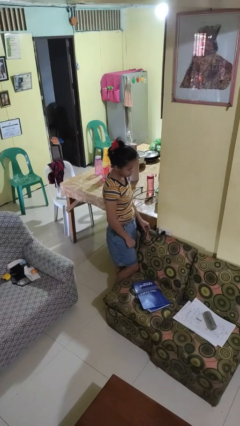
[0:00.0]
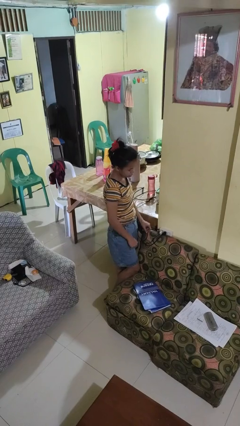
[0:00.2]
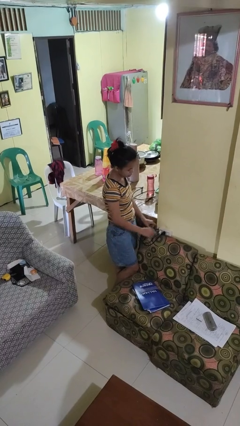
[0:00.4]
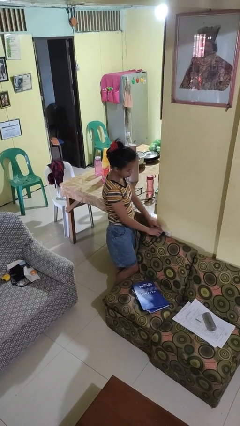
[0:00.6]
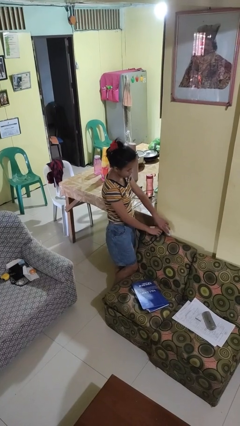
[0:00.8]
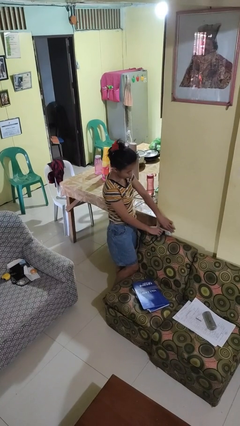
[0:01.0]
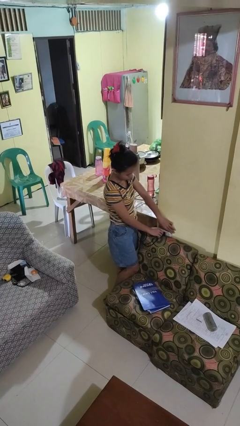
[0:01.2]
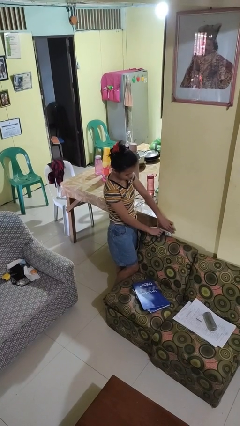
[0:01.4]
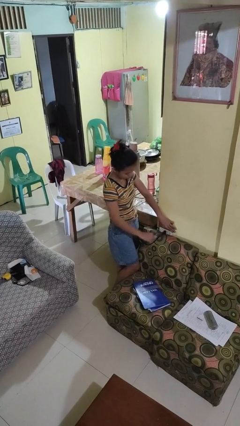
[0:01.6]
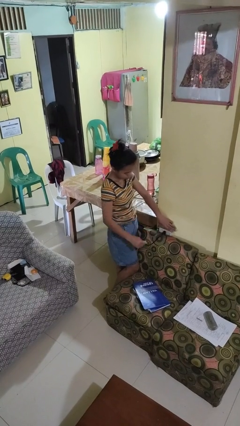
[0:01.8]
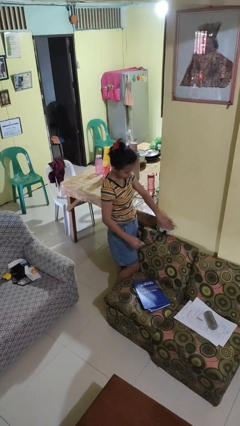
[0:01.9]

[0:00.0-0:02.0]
person unplugs from electrical socket

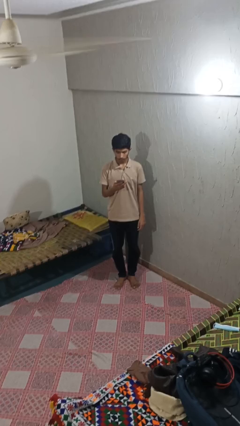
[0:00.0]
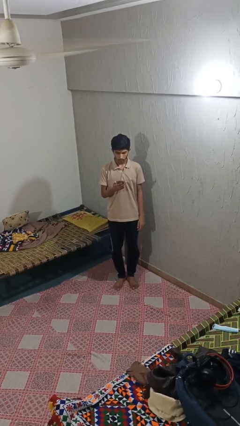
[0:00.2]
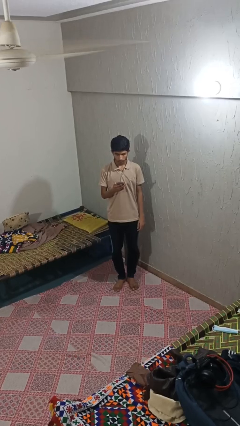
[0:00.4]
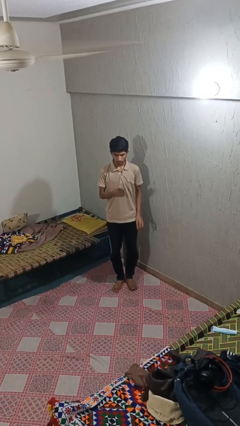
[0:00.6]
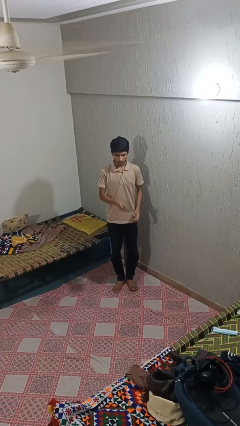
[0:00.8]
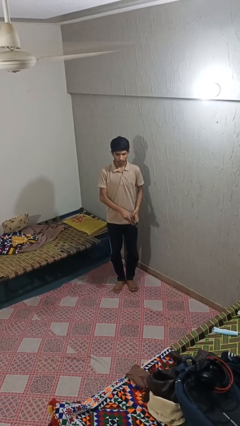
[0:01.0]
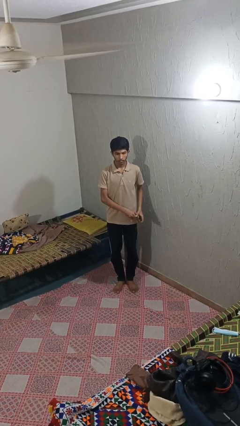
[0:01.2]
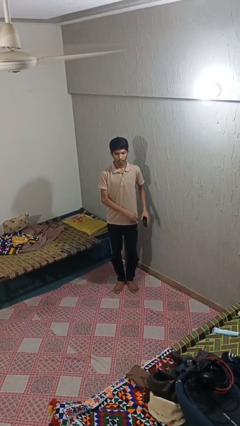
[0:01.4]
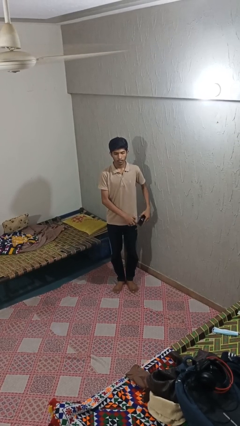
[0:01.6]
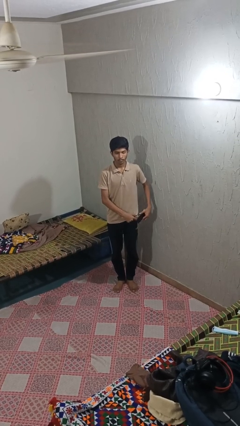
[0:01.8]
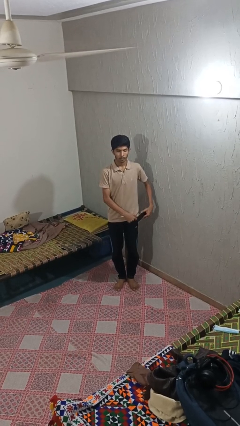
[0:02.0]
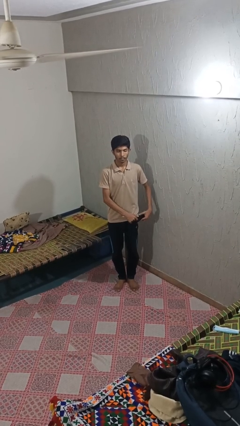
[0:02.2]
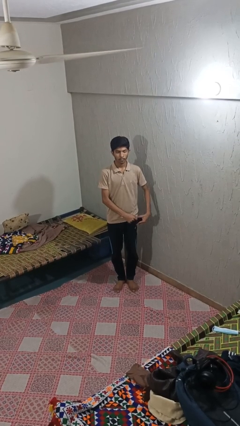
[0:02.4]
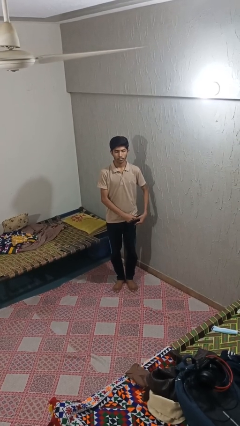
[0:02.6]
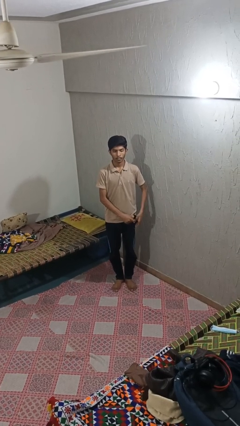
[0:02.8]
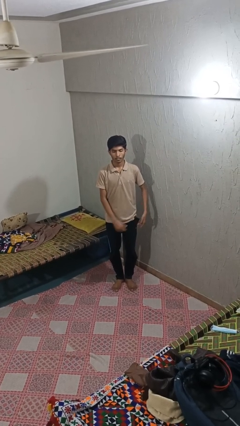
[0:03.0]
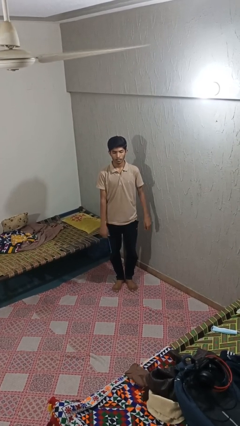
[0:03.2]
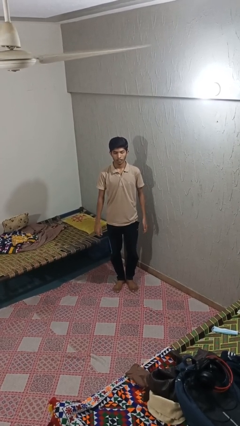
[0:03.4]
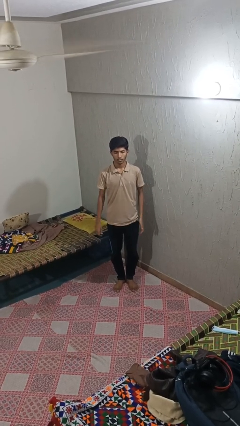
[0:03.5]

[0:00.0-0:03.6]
person puts phone into pocket

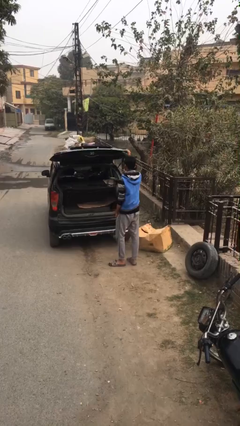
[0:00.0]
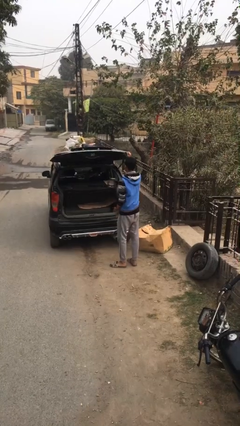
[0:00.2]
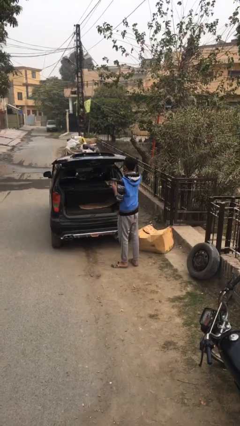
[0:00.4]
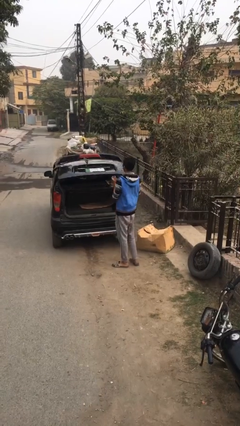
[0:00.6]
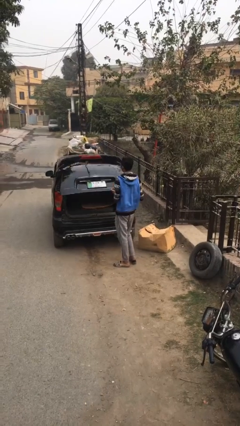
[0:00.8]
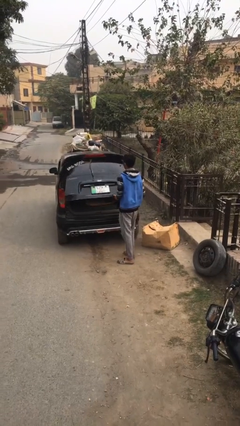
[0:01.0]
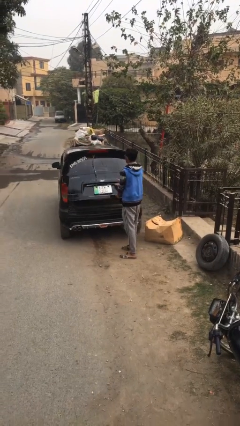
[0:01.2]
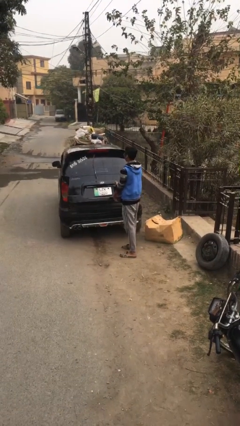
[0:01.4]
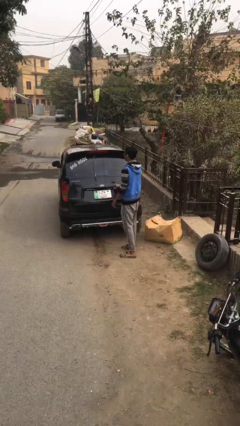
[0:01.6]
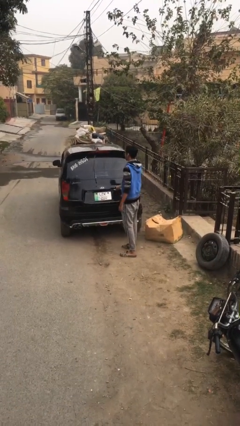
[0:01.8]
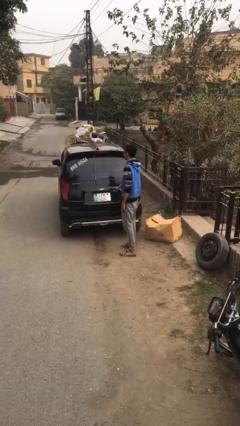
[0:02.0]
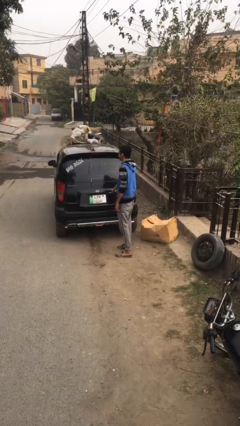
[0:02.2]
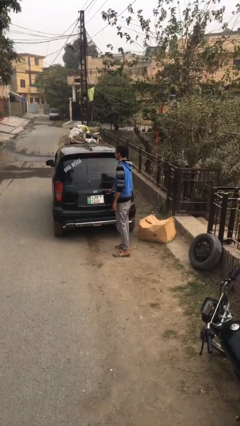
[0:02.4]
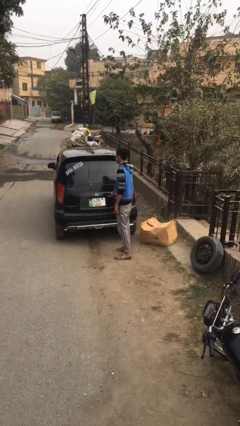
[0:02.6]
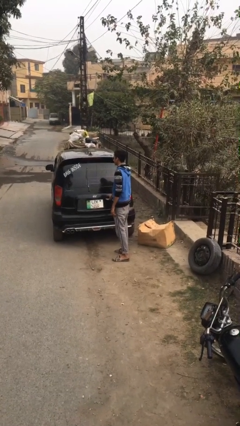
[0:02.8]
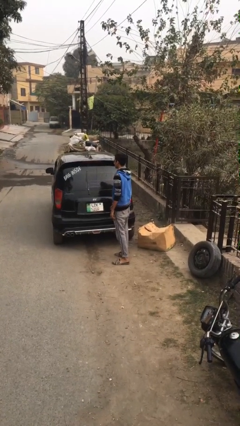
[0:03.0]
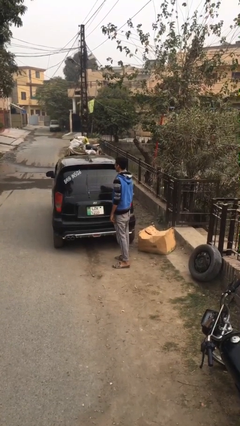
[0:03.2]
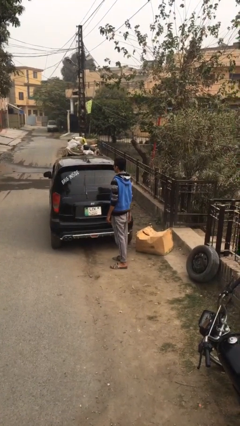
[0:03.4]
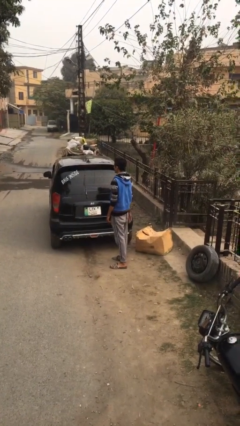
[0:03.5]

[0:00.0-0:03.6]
person closes car trunk

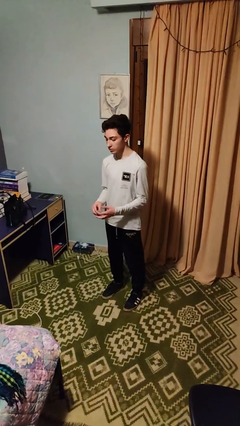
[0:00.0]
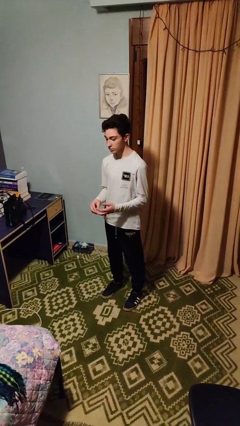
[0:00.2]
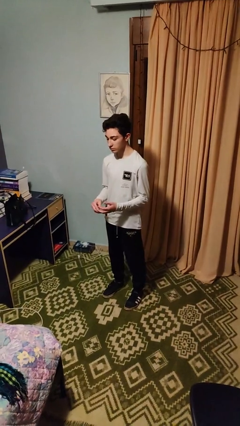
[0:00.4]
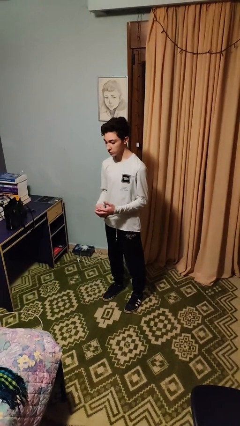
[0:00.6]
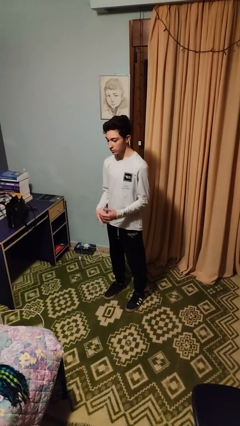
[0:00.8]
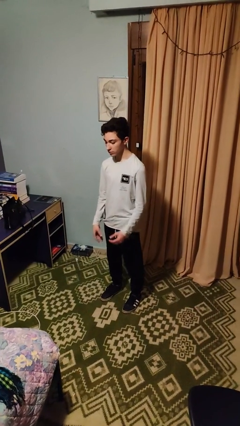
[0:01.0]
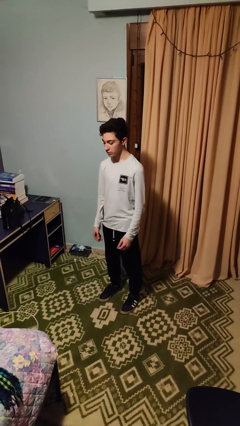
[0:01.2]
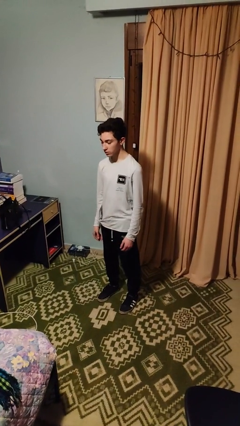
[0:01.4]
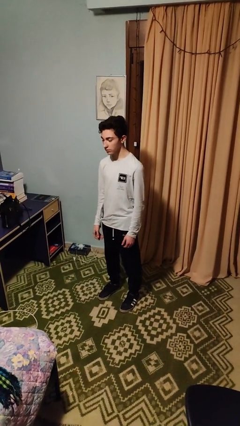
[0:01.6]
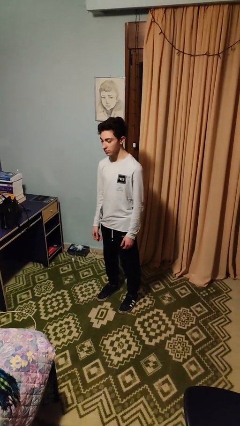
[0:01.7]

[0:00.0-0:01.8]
person puts on ring

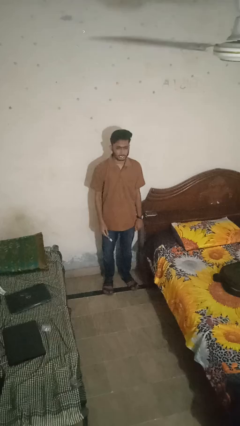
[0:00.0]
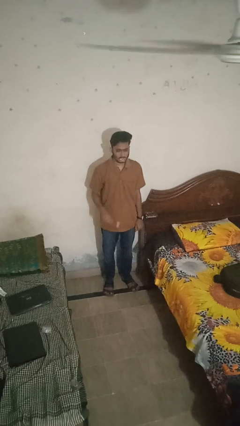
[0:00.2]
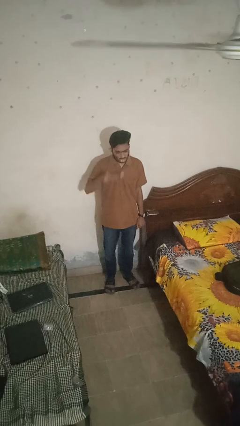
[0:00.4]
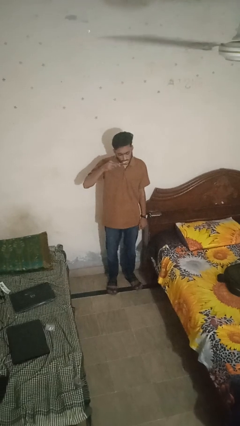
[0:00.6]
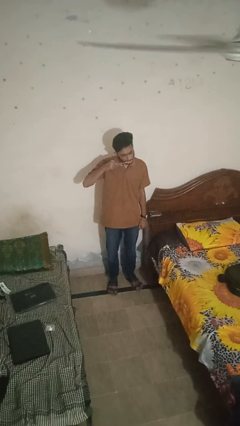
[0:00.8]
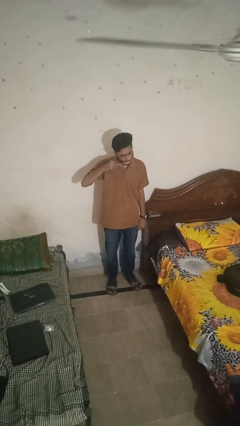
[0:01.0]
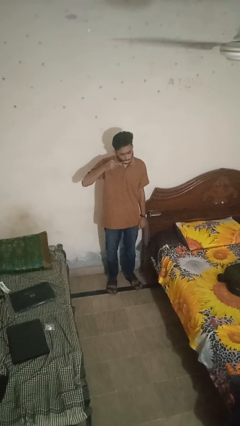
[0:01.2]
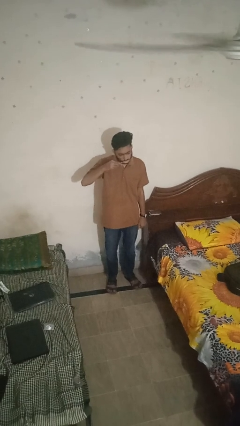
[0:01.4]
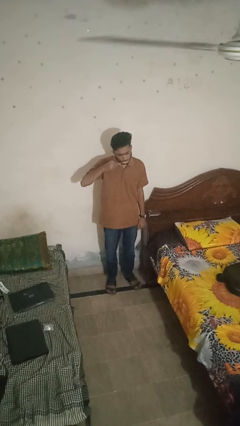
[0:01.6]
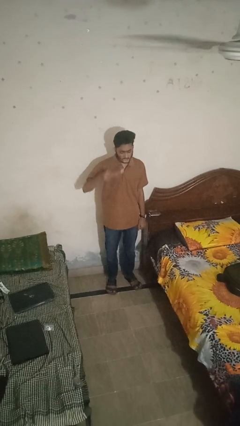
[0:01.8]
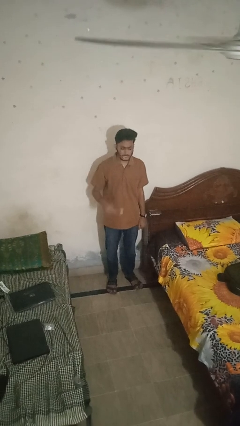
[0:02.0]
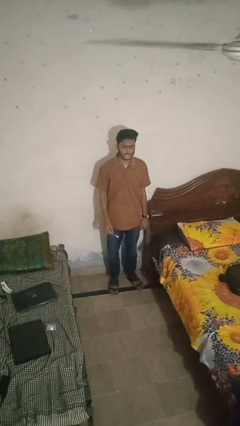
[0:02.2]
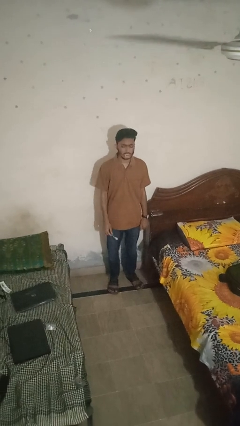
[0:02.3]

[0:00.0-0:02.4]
person brushes teeth

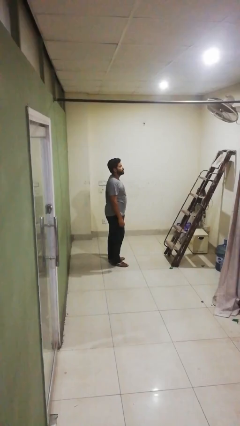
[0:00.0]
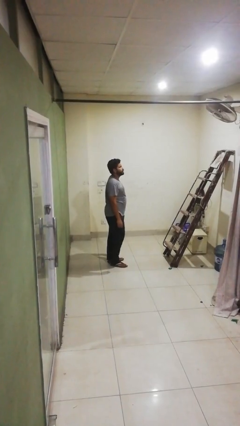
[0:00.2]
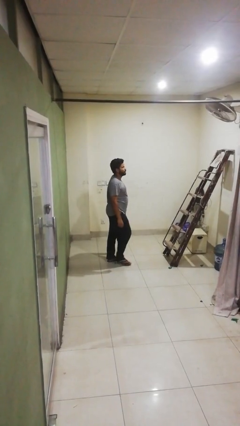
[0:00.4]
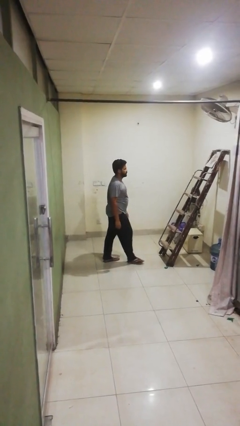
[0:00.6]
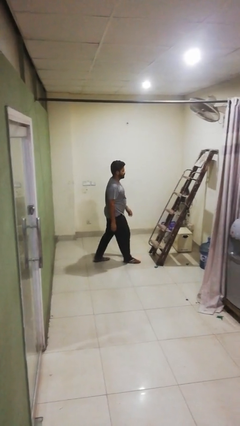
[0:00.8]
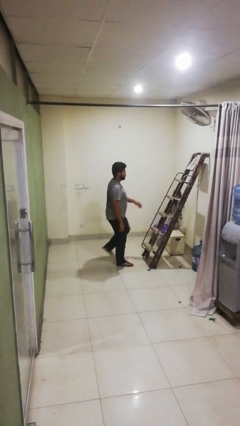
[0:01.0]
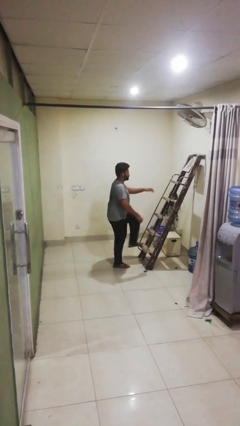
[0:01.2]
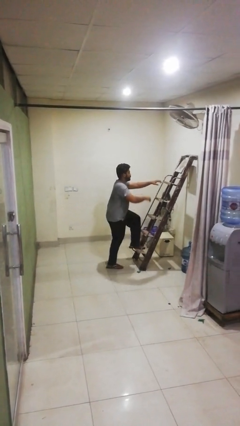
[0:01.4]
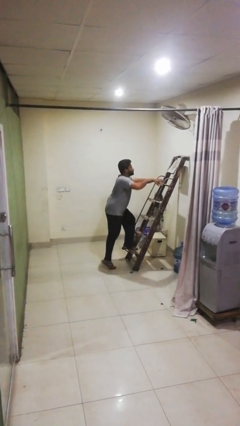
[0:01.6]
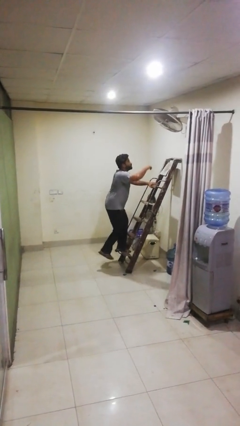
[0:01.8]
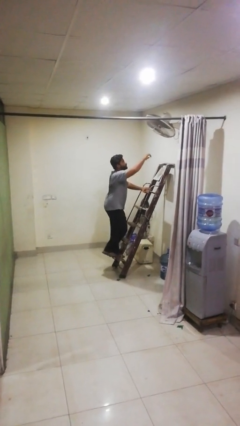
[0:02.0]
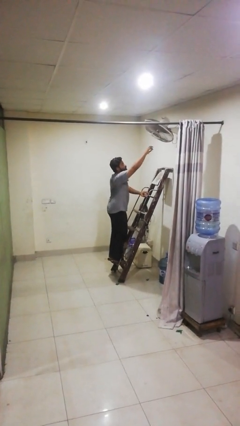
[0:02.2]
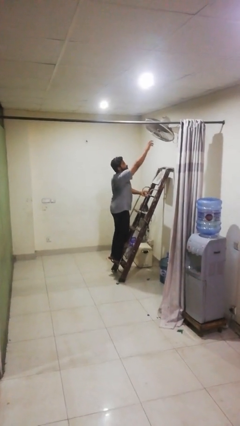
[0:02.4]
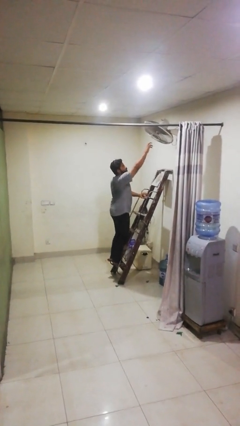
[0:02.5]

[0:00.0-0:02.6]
person climbs up ladder

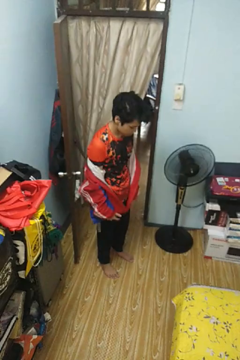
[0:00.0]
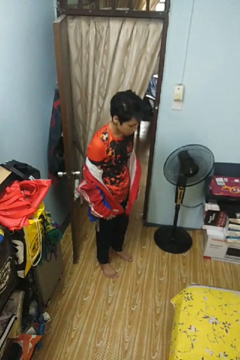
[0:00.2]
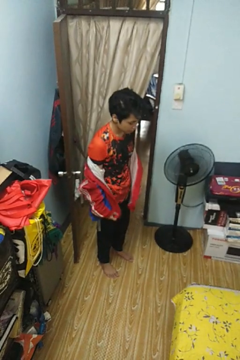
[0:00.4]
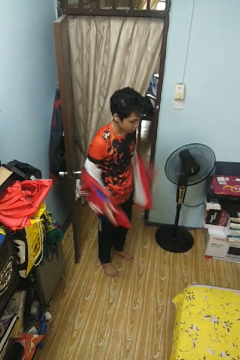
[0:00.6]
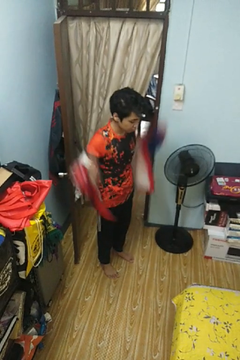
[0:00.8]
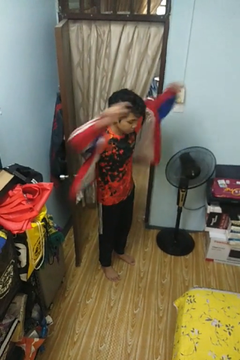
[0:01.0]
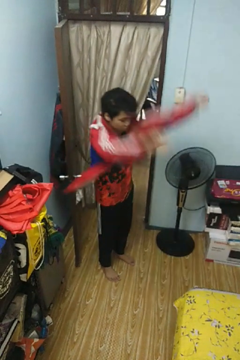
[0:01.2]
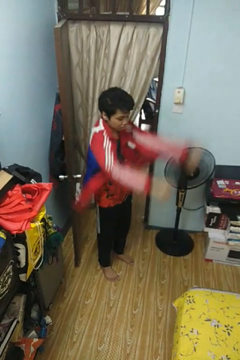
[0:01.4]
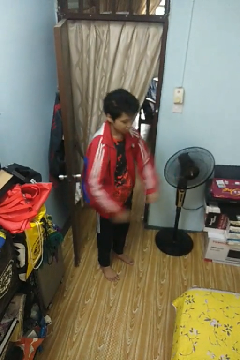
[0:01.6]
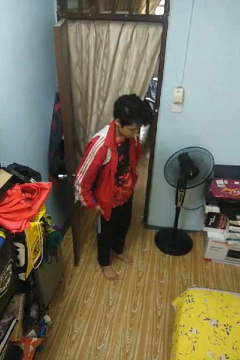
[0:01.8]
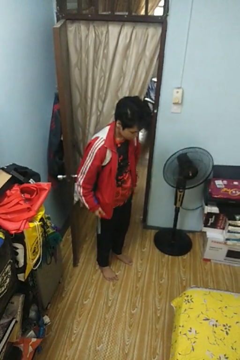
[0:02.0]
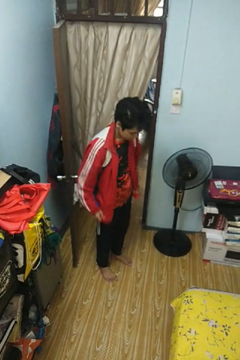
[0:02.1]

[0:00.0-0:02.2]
person puts on jacket
